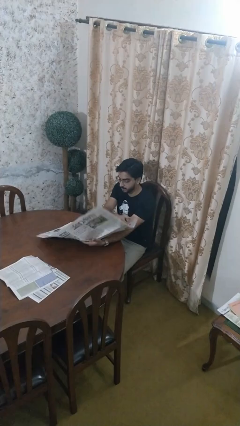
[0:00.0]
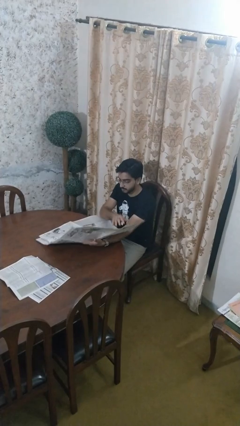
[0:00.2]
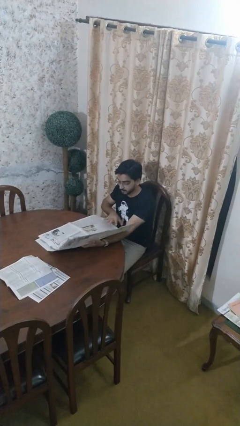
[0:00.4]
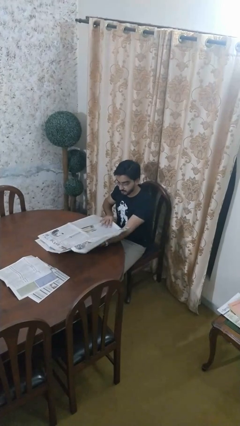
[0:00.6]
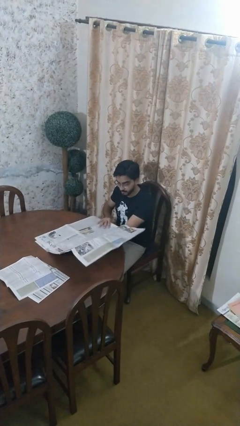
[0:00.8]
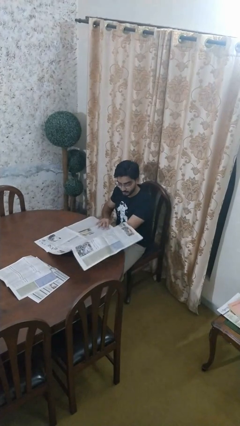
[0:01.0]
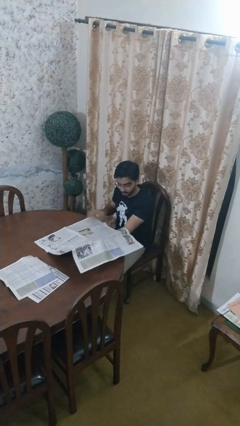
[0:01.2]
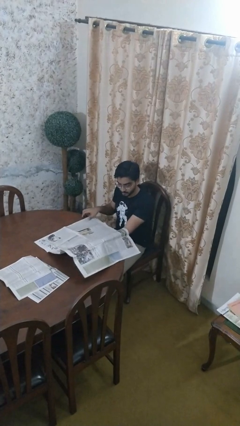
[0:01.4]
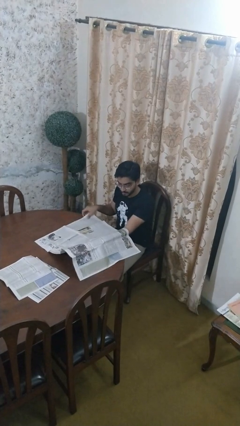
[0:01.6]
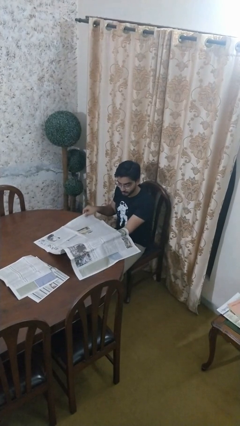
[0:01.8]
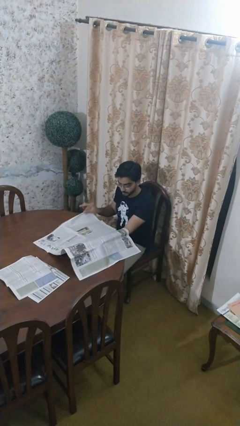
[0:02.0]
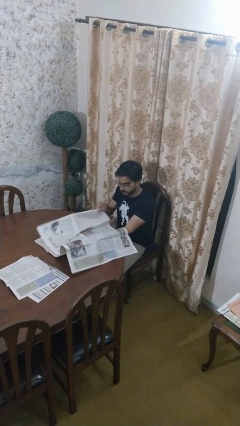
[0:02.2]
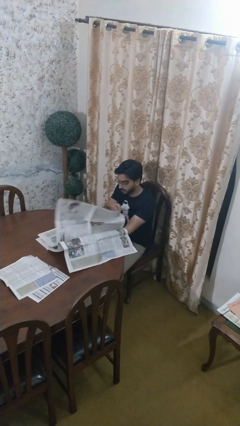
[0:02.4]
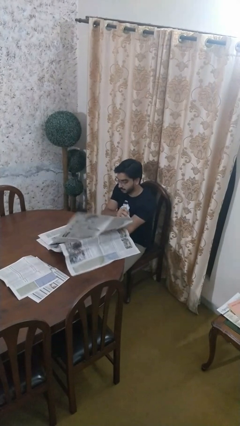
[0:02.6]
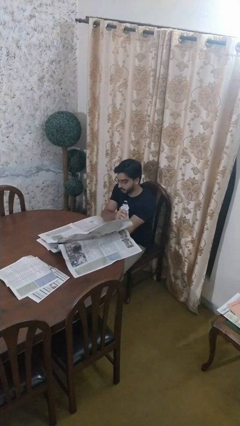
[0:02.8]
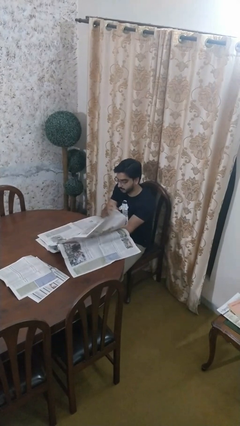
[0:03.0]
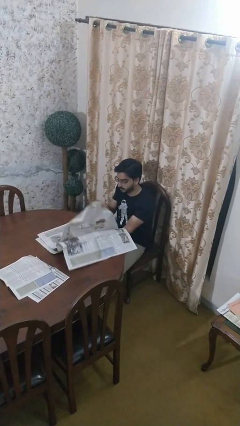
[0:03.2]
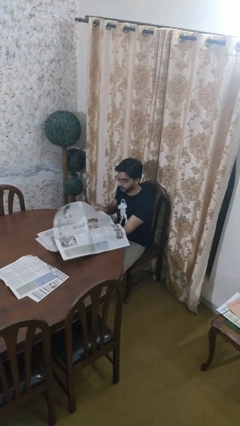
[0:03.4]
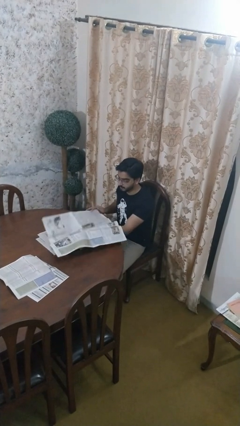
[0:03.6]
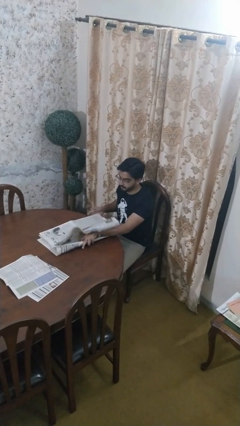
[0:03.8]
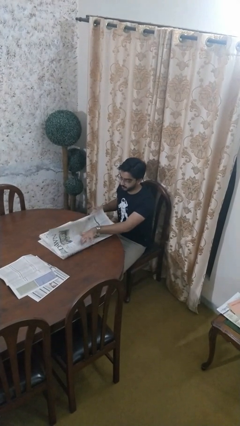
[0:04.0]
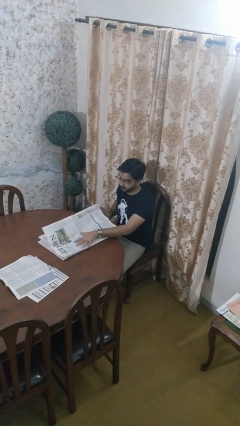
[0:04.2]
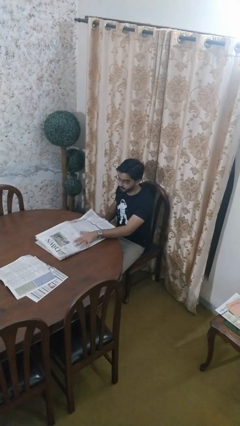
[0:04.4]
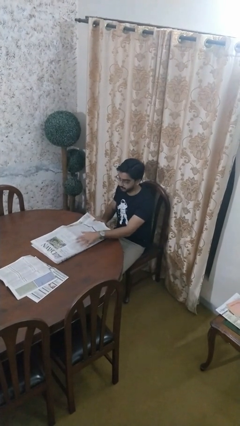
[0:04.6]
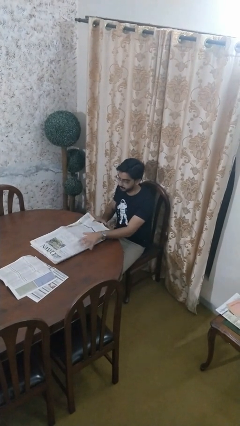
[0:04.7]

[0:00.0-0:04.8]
person reads newspaper

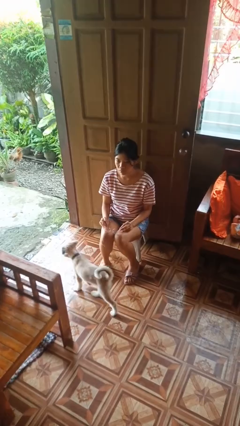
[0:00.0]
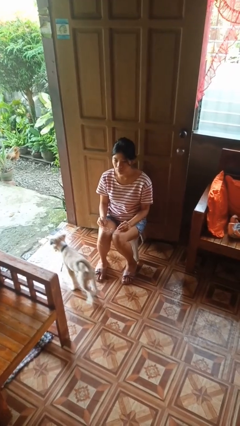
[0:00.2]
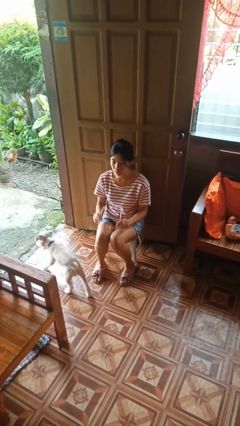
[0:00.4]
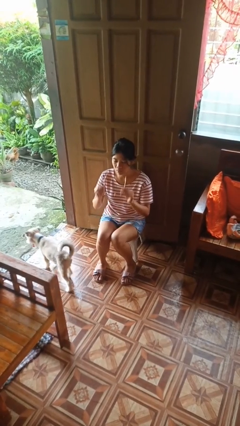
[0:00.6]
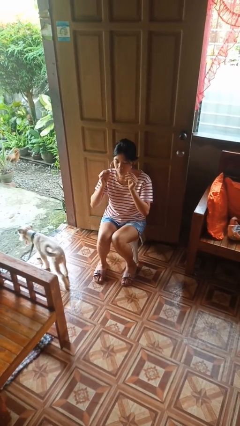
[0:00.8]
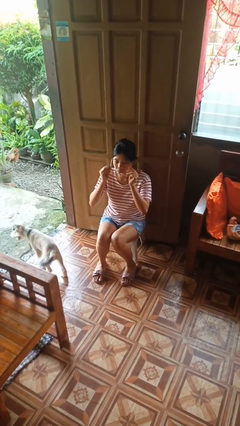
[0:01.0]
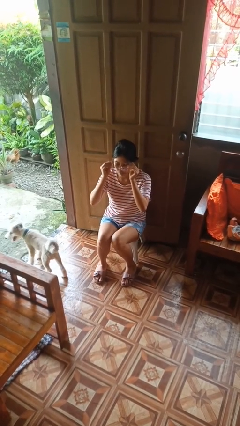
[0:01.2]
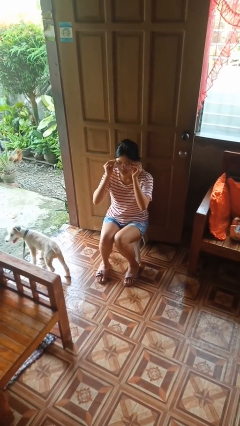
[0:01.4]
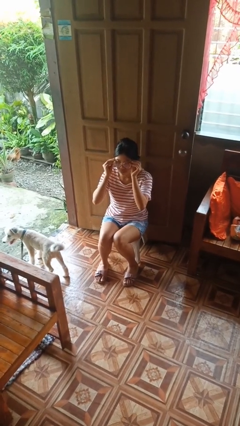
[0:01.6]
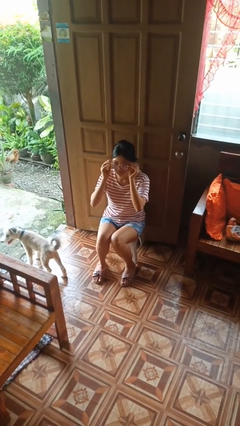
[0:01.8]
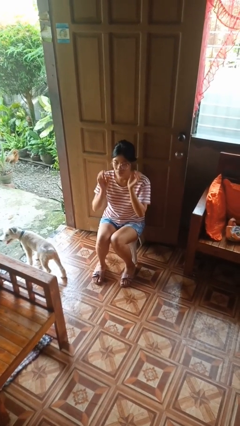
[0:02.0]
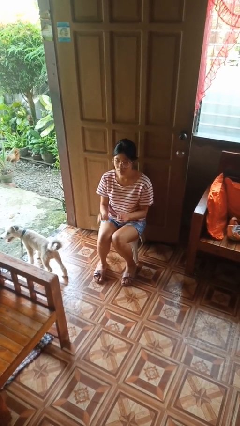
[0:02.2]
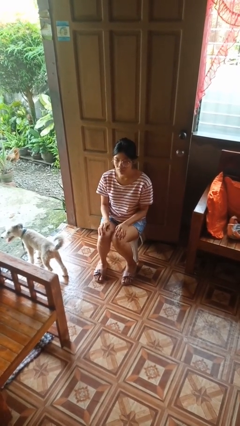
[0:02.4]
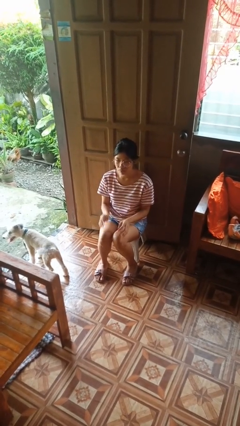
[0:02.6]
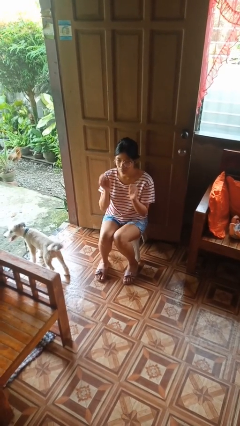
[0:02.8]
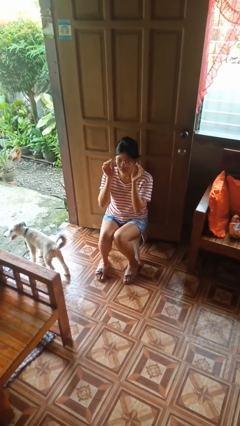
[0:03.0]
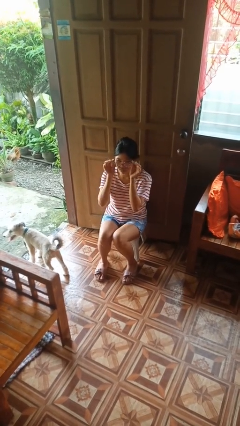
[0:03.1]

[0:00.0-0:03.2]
person puts on glasses

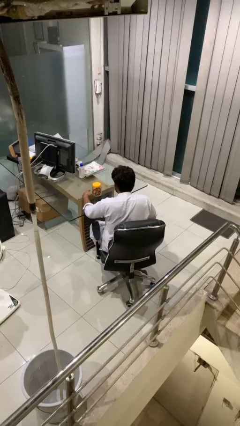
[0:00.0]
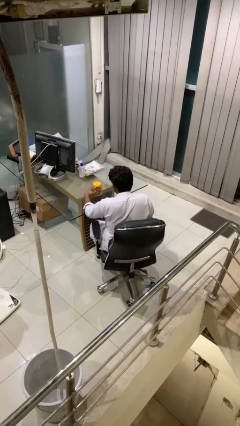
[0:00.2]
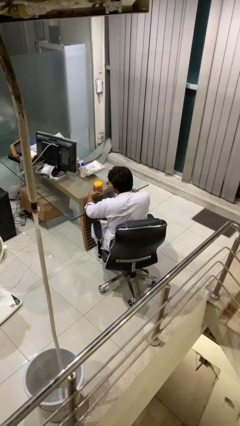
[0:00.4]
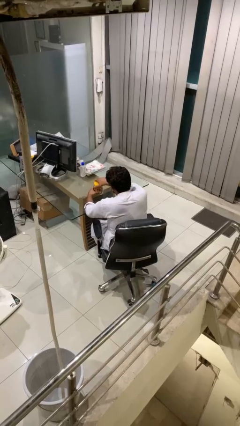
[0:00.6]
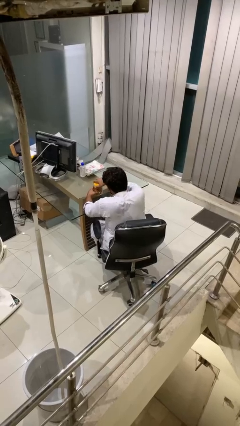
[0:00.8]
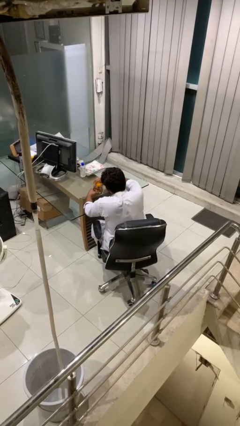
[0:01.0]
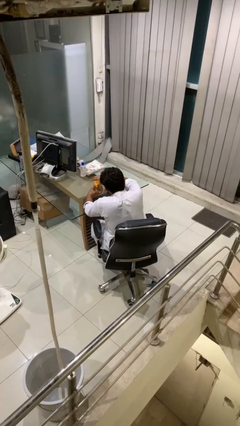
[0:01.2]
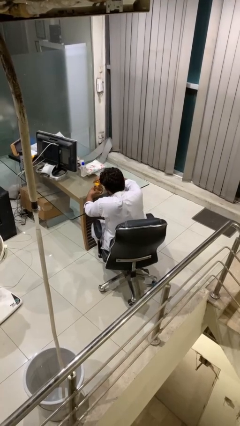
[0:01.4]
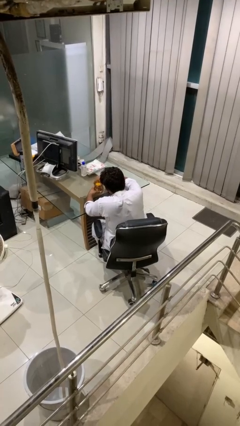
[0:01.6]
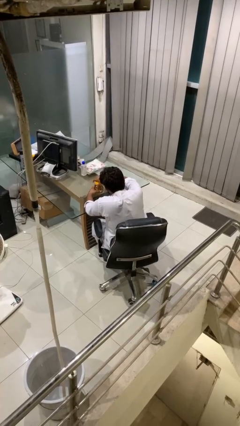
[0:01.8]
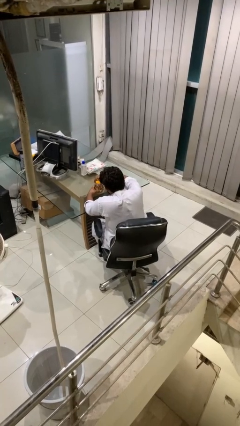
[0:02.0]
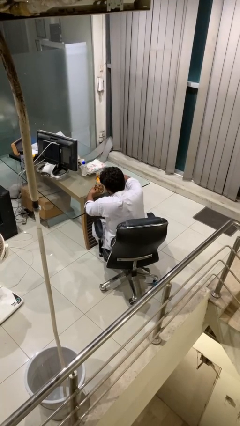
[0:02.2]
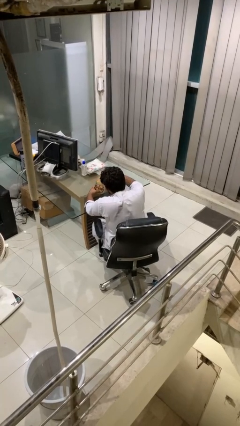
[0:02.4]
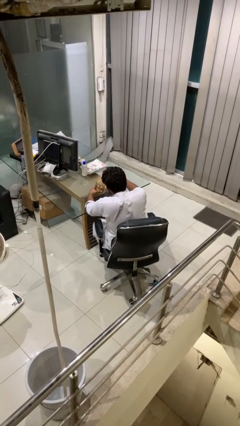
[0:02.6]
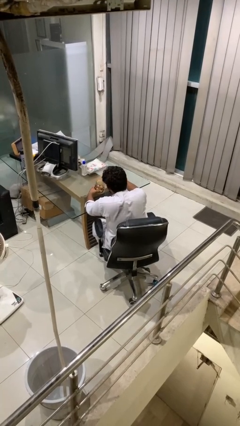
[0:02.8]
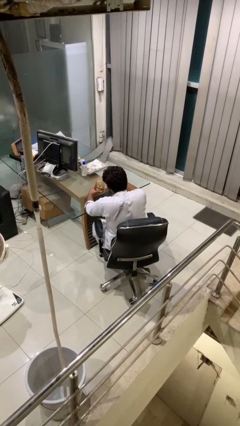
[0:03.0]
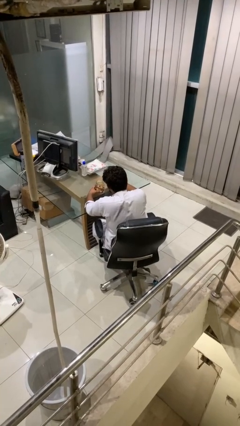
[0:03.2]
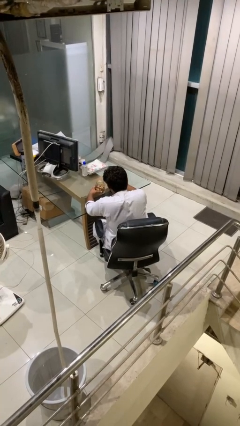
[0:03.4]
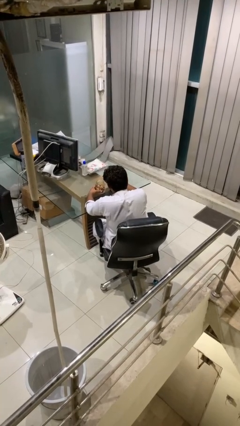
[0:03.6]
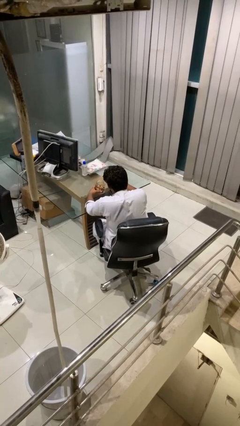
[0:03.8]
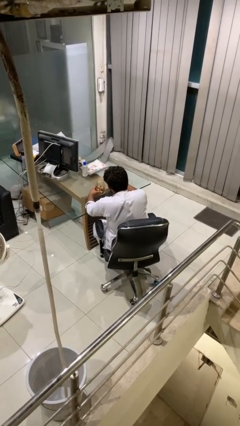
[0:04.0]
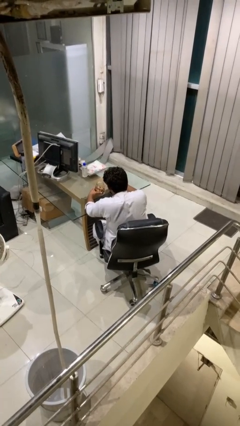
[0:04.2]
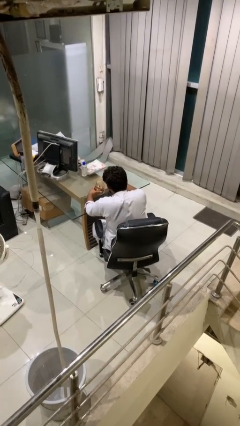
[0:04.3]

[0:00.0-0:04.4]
person opens jar

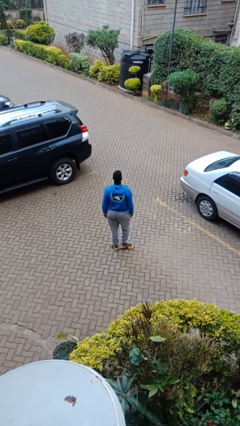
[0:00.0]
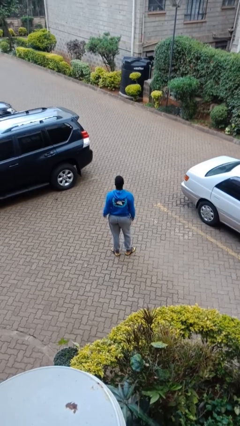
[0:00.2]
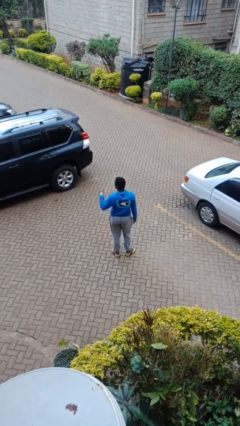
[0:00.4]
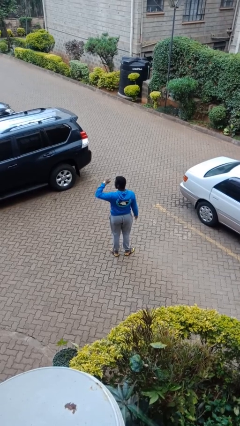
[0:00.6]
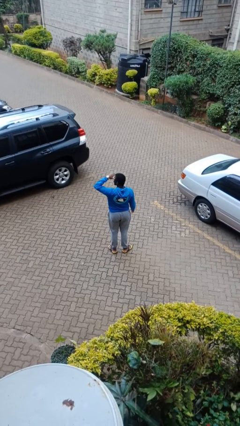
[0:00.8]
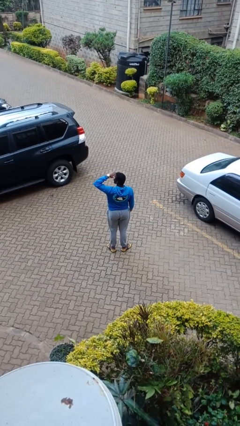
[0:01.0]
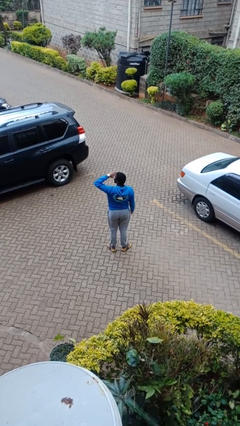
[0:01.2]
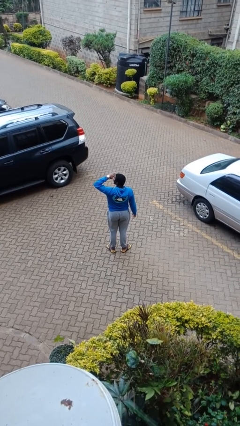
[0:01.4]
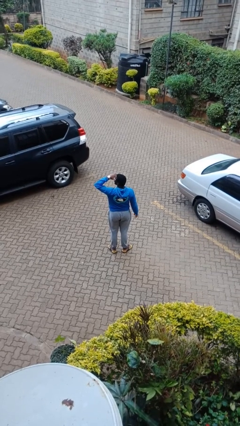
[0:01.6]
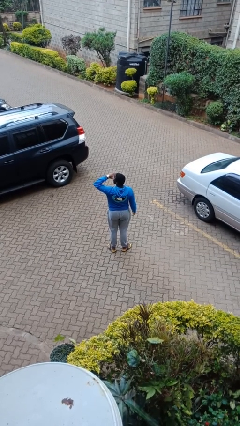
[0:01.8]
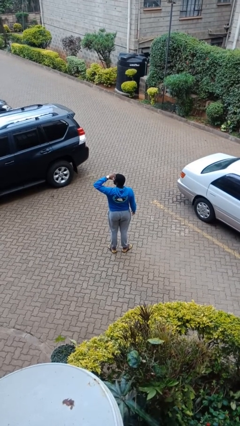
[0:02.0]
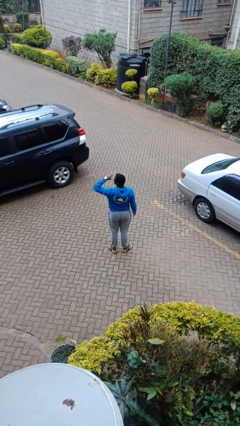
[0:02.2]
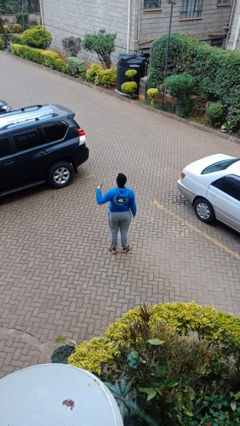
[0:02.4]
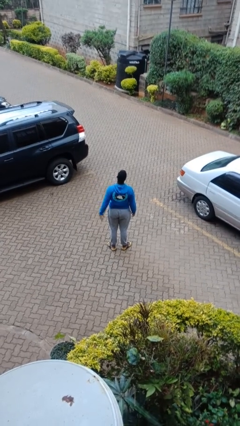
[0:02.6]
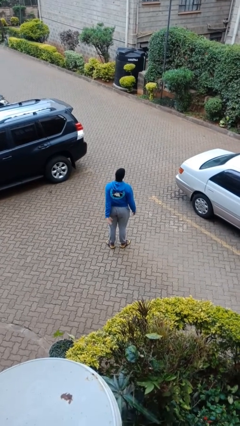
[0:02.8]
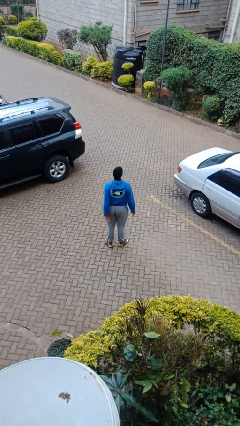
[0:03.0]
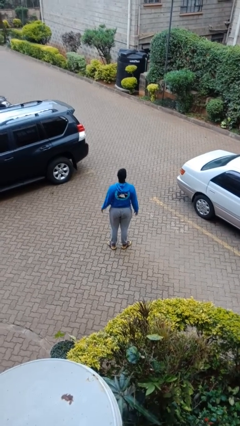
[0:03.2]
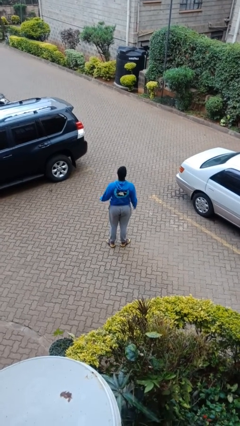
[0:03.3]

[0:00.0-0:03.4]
person shades eyes

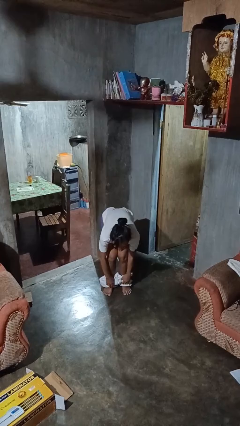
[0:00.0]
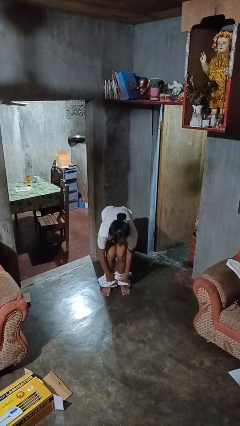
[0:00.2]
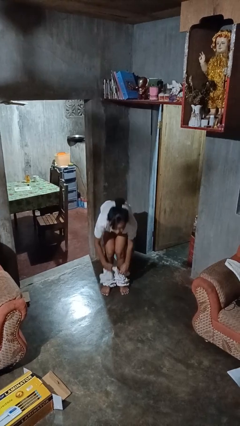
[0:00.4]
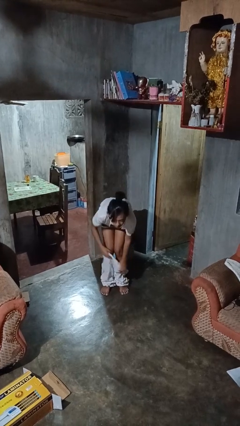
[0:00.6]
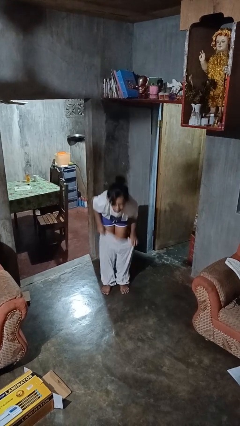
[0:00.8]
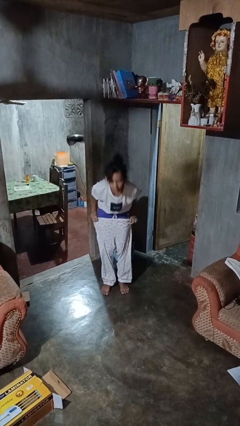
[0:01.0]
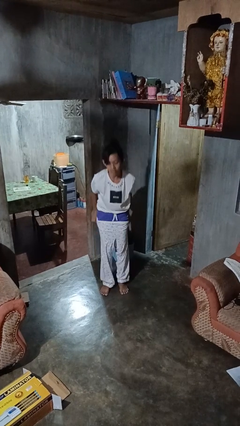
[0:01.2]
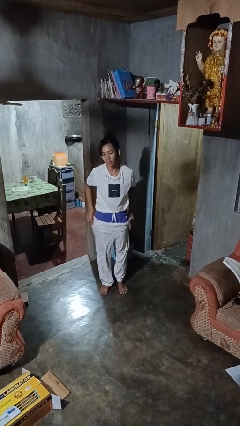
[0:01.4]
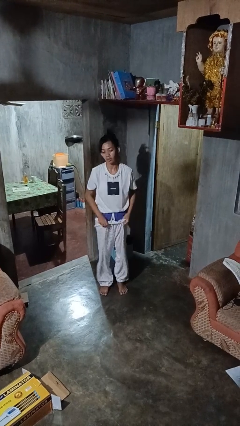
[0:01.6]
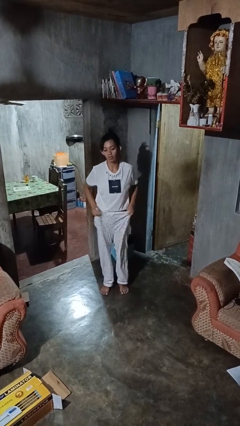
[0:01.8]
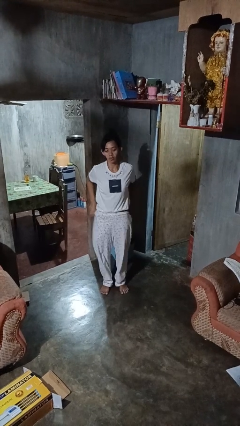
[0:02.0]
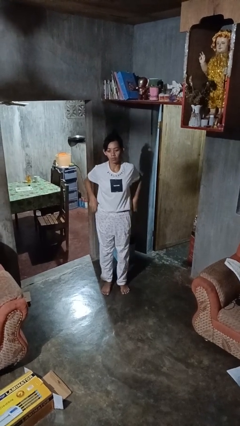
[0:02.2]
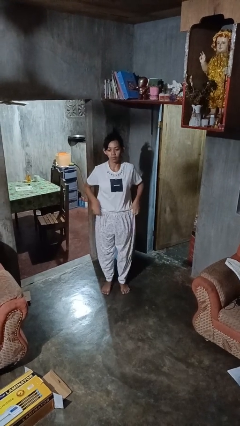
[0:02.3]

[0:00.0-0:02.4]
person puts on pants
